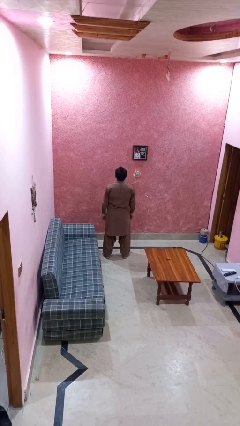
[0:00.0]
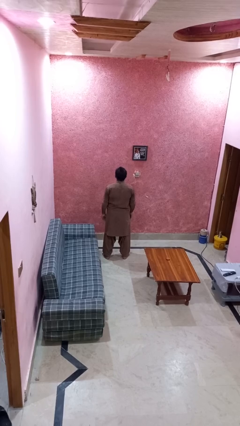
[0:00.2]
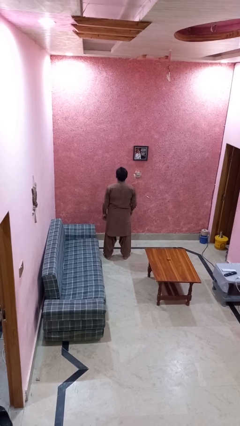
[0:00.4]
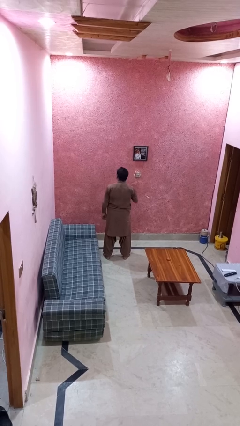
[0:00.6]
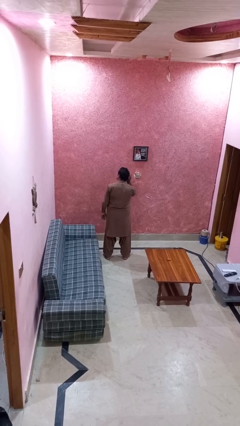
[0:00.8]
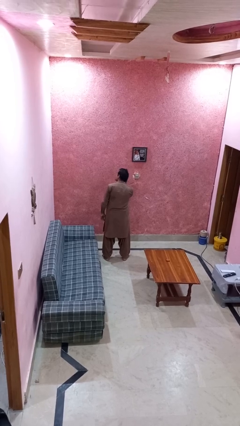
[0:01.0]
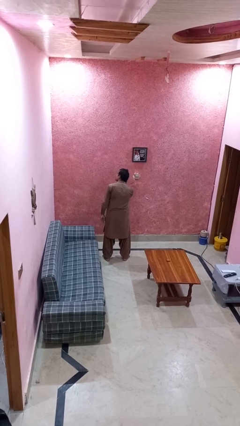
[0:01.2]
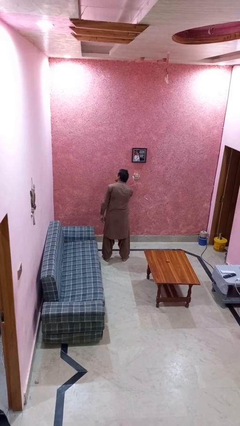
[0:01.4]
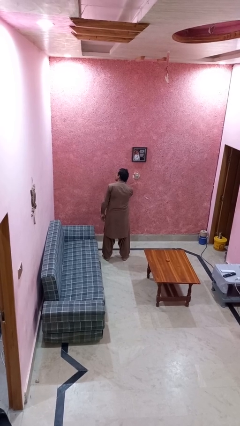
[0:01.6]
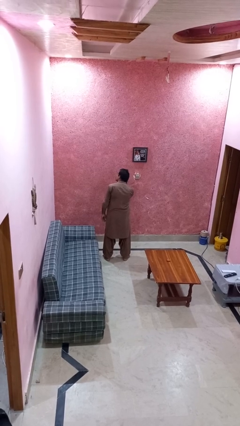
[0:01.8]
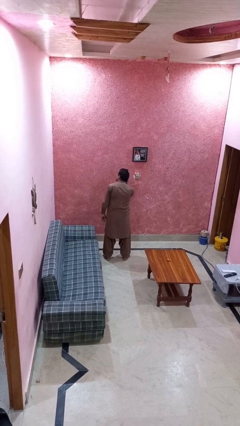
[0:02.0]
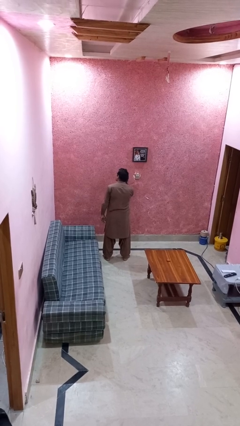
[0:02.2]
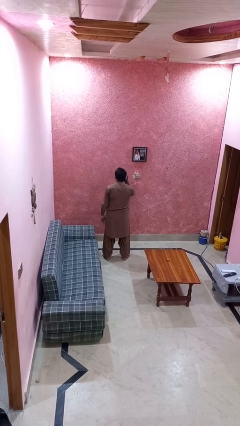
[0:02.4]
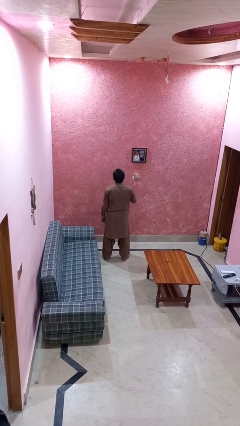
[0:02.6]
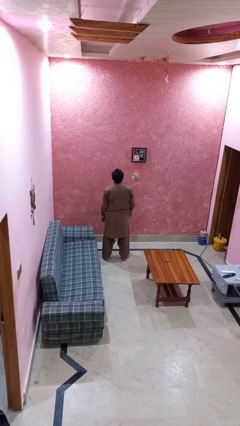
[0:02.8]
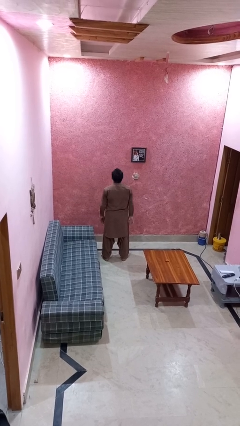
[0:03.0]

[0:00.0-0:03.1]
person gestures listen closely

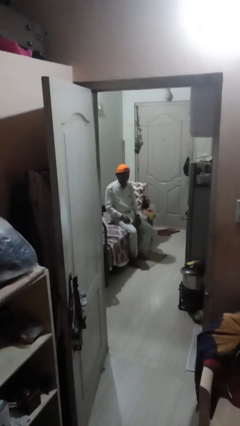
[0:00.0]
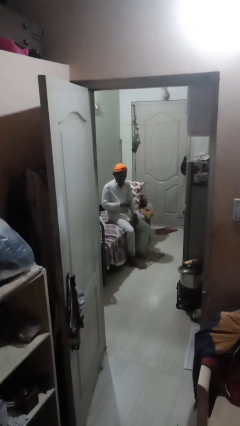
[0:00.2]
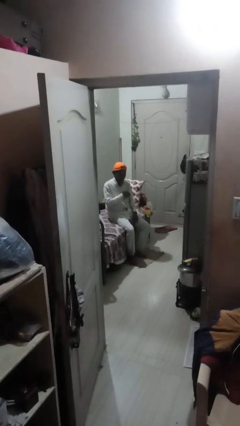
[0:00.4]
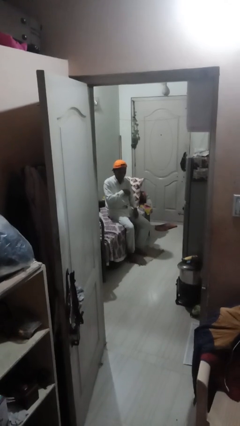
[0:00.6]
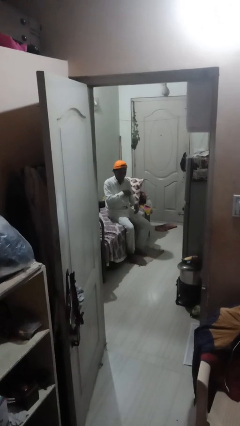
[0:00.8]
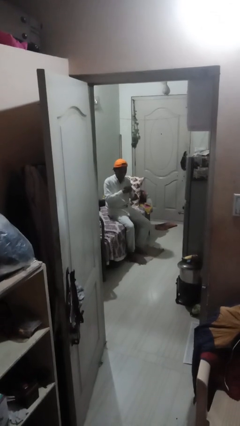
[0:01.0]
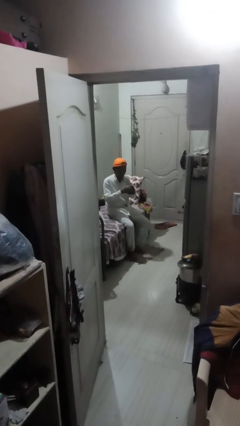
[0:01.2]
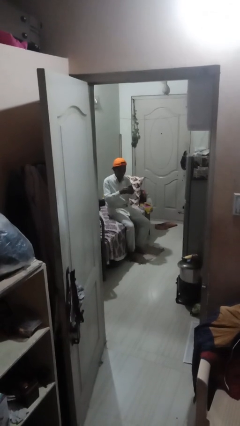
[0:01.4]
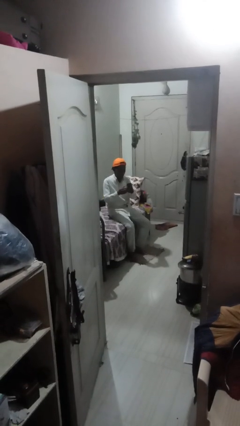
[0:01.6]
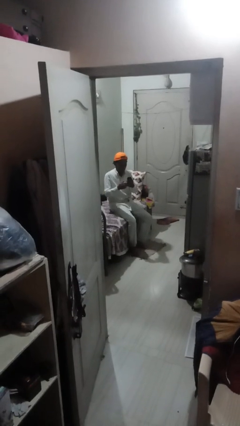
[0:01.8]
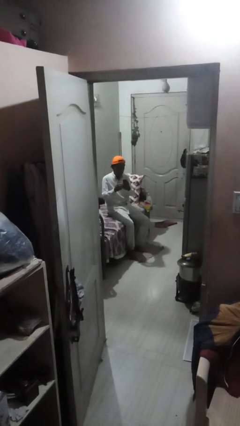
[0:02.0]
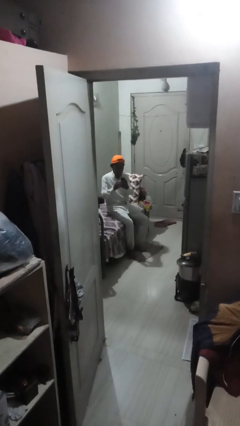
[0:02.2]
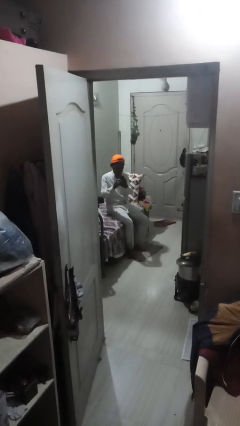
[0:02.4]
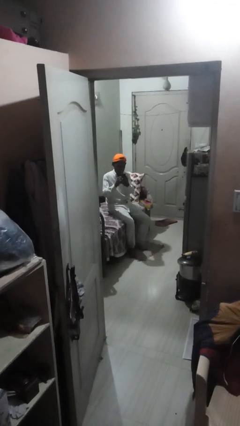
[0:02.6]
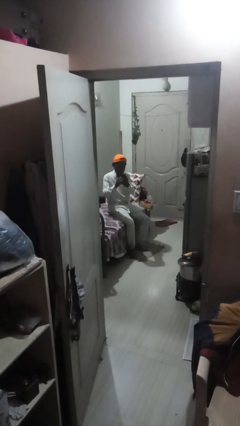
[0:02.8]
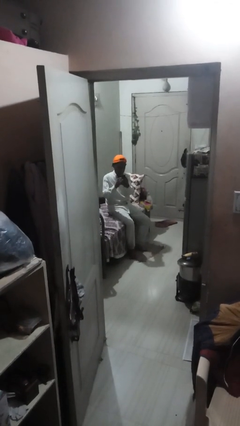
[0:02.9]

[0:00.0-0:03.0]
person takes phone from pocket

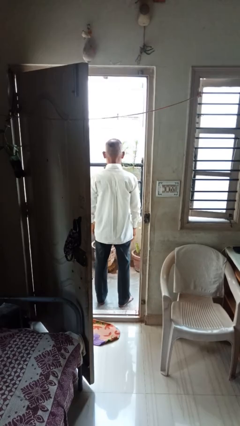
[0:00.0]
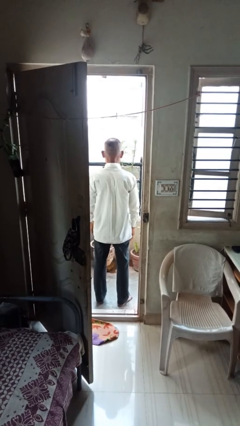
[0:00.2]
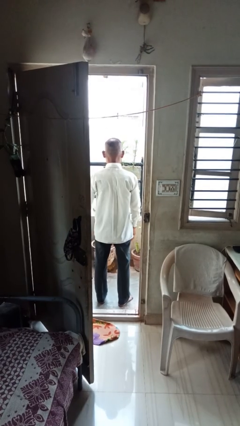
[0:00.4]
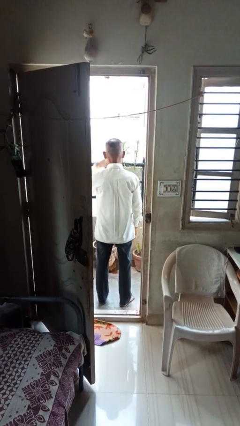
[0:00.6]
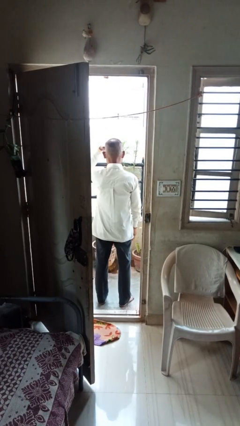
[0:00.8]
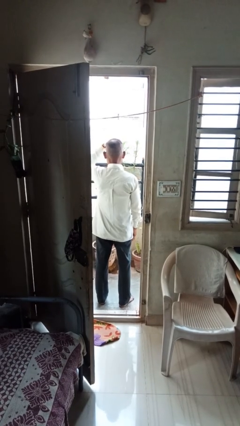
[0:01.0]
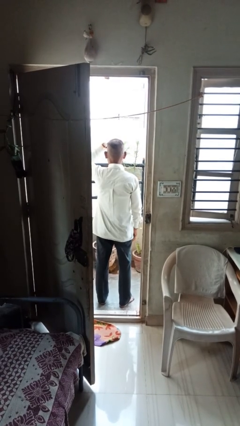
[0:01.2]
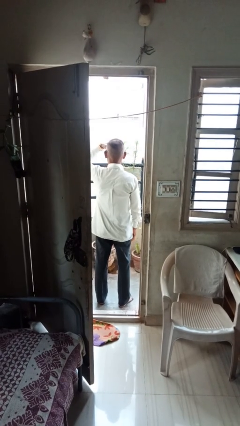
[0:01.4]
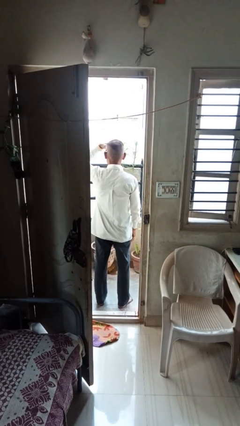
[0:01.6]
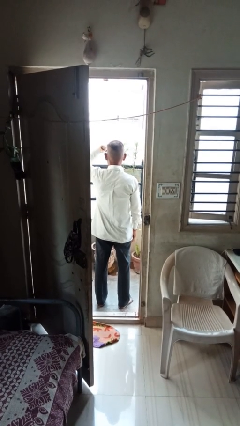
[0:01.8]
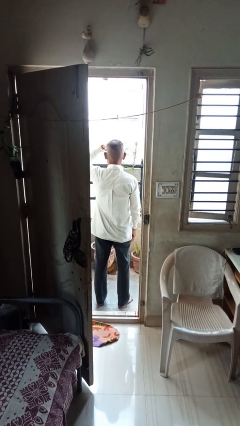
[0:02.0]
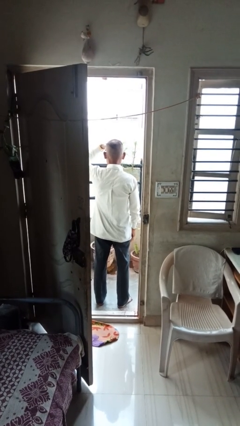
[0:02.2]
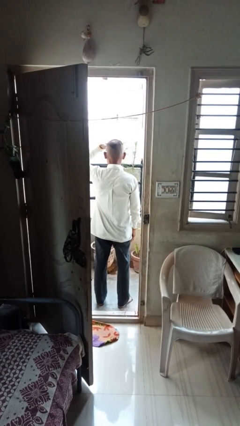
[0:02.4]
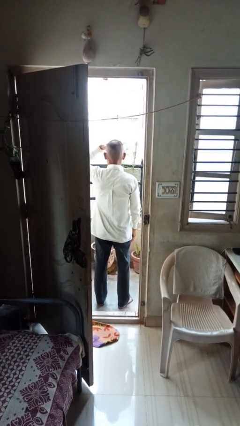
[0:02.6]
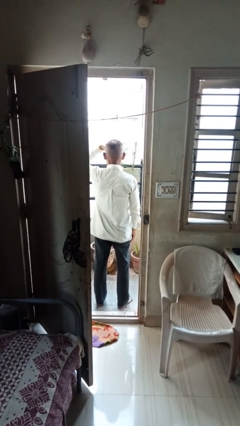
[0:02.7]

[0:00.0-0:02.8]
person shades eyes

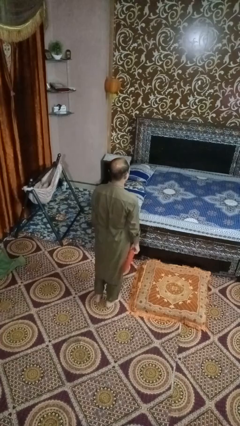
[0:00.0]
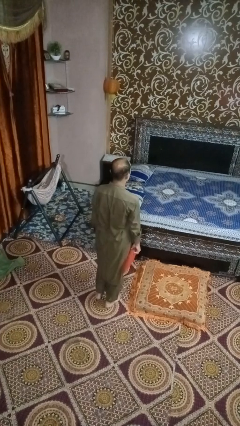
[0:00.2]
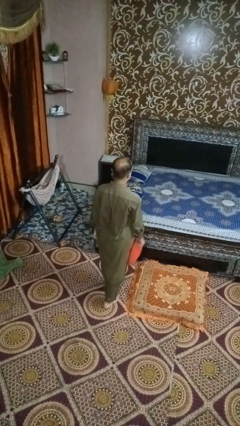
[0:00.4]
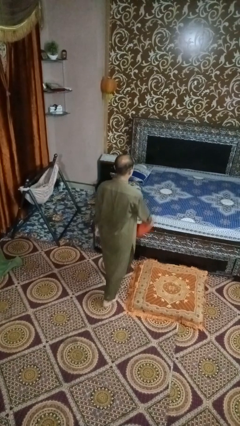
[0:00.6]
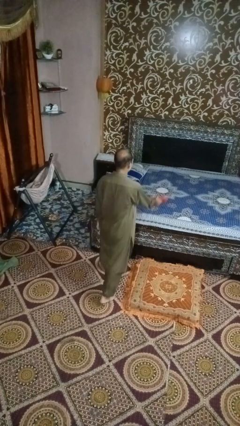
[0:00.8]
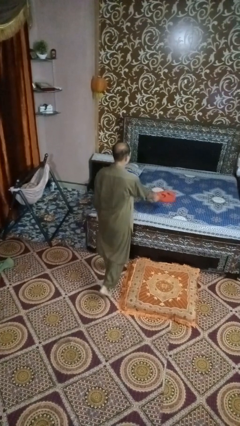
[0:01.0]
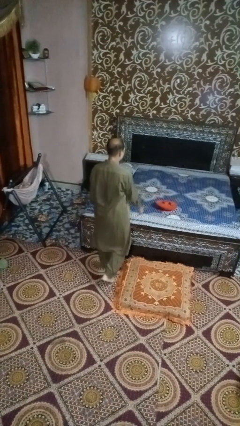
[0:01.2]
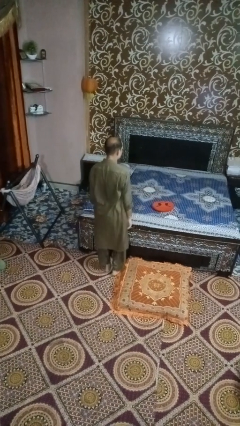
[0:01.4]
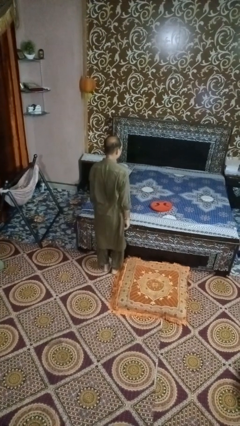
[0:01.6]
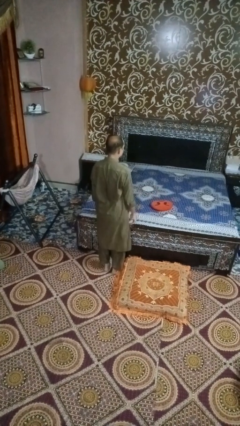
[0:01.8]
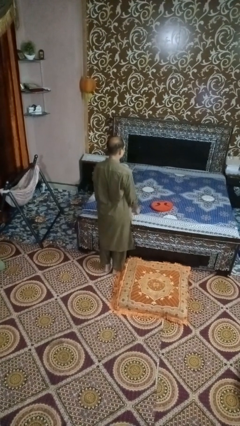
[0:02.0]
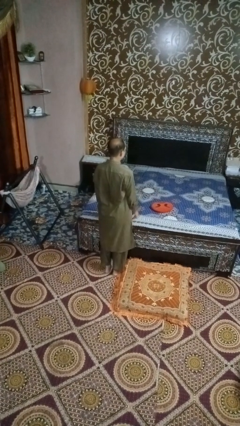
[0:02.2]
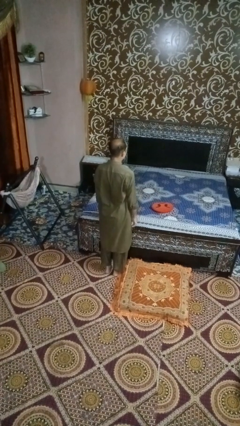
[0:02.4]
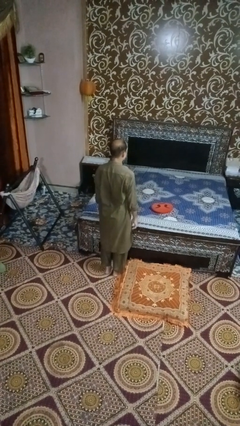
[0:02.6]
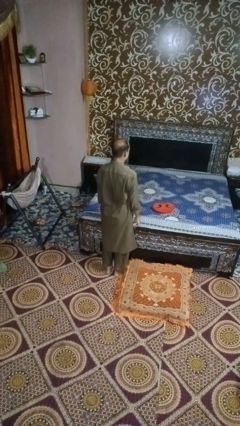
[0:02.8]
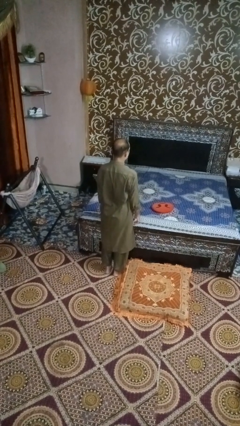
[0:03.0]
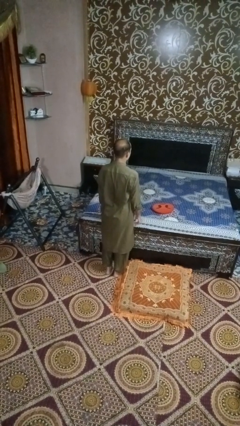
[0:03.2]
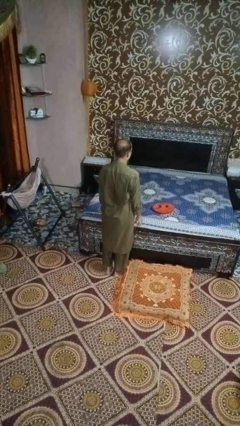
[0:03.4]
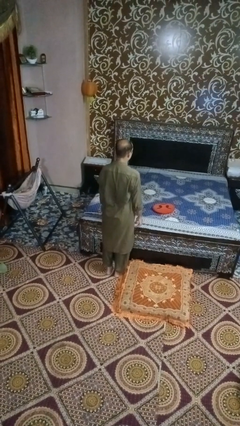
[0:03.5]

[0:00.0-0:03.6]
person throws object on bed

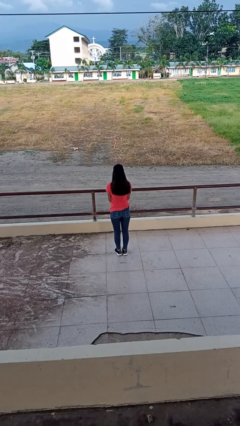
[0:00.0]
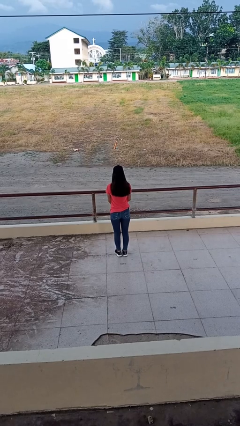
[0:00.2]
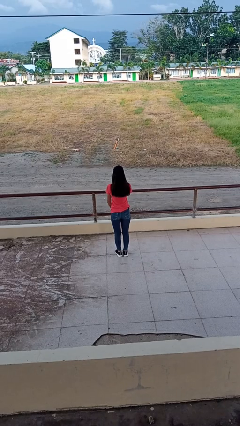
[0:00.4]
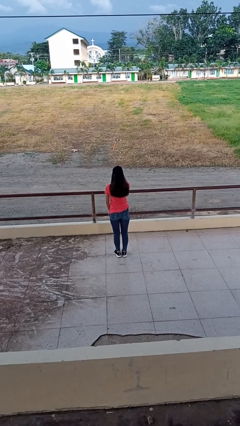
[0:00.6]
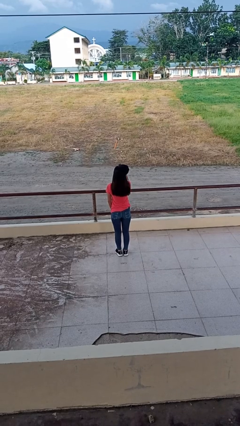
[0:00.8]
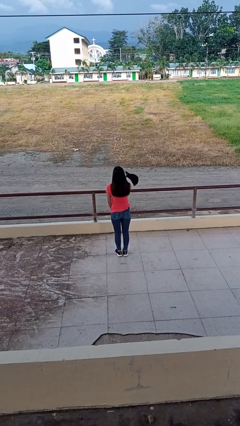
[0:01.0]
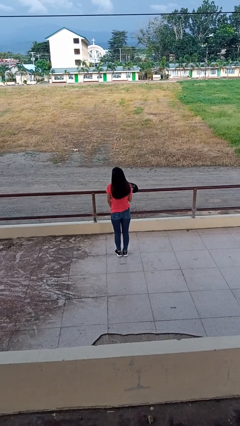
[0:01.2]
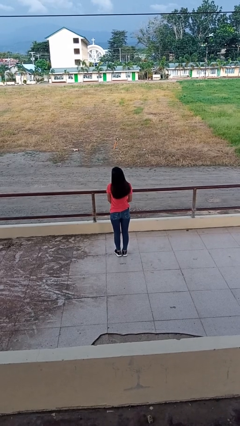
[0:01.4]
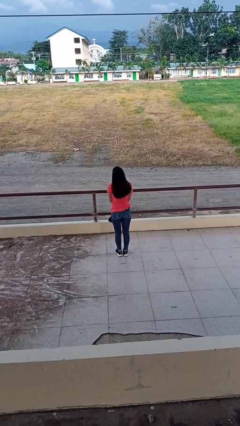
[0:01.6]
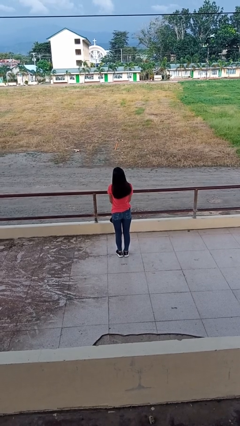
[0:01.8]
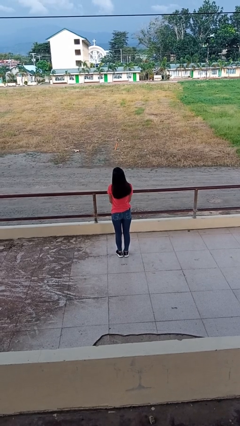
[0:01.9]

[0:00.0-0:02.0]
person takes off hat

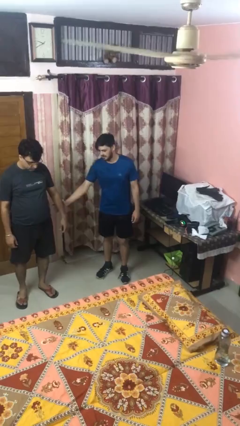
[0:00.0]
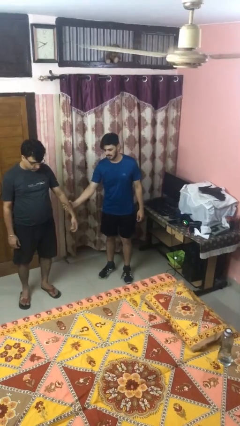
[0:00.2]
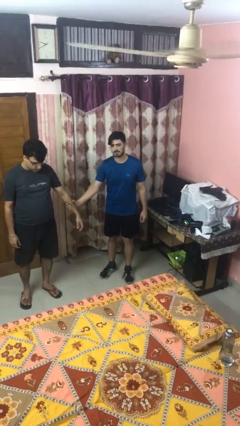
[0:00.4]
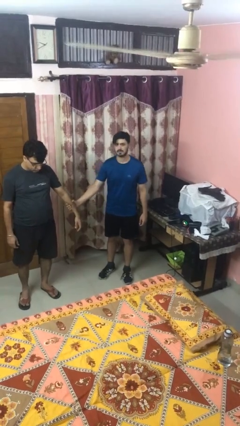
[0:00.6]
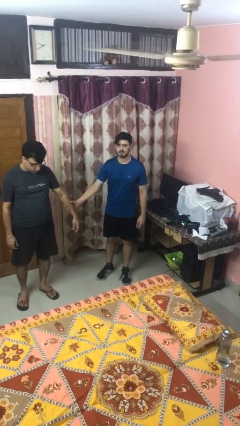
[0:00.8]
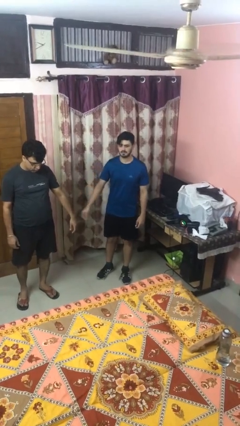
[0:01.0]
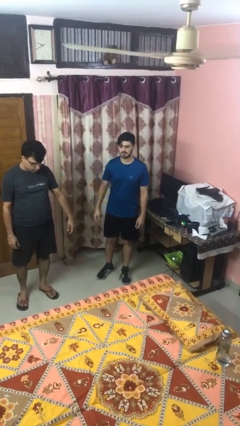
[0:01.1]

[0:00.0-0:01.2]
person grabs person by forearm

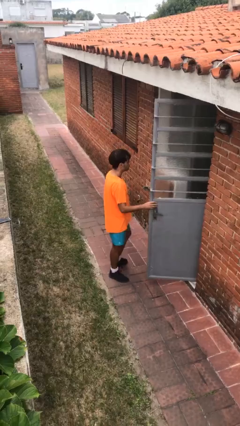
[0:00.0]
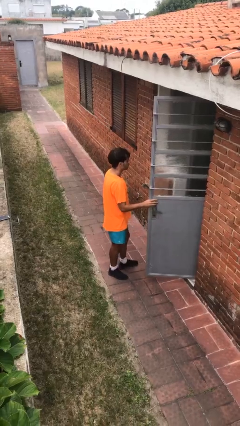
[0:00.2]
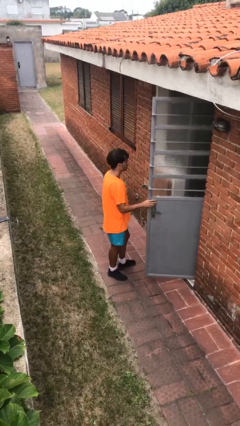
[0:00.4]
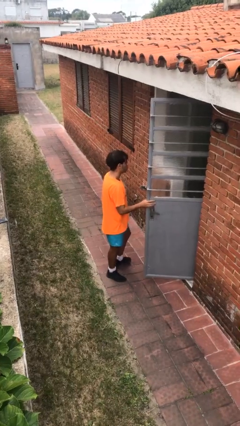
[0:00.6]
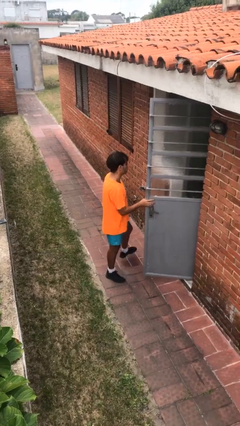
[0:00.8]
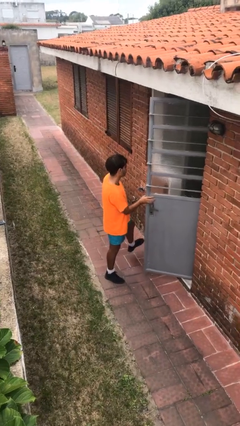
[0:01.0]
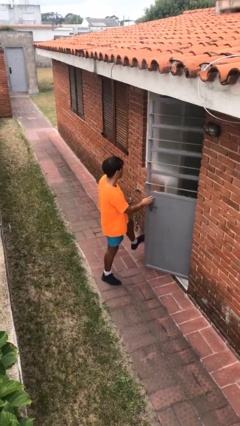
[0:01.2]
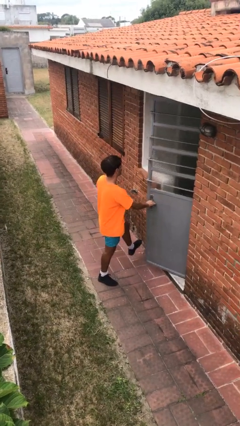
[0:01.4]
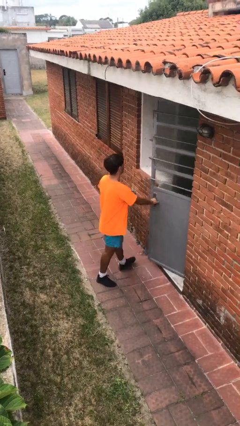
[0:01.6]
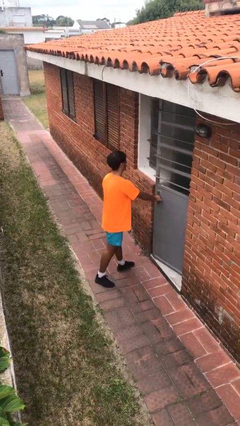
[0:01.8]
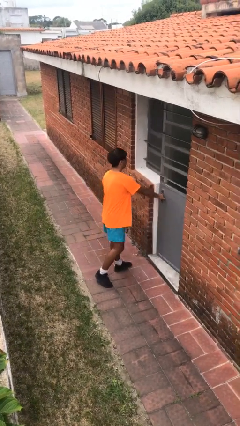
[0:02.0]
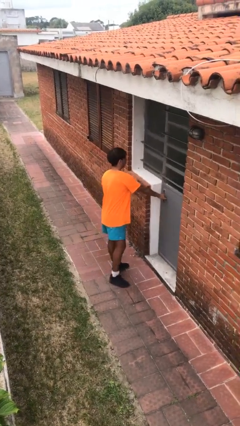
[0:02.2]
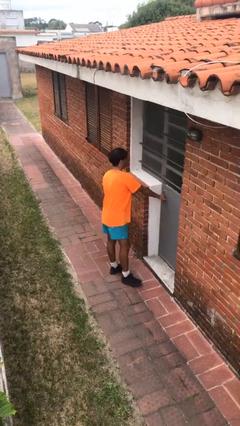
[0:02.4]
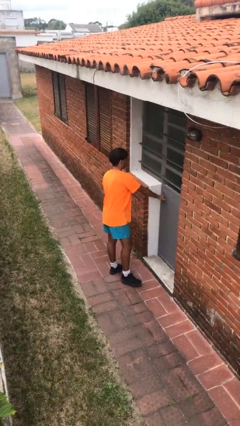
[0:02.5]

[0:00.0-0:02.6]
person closes facility door
